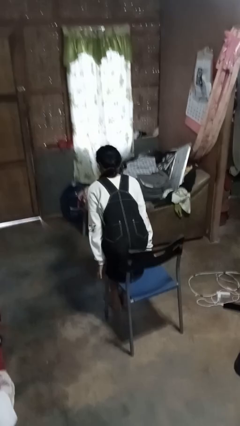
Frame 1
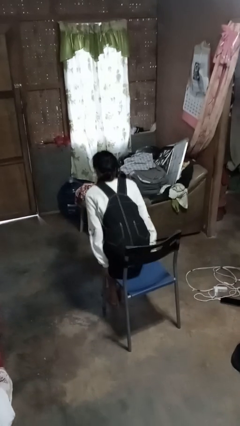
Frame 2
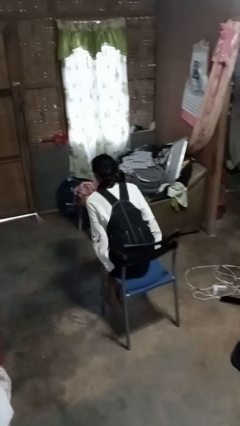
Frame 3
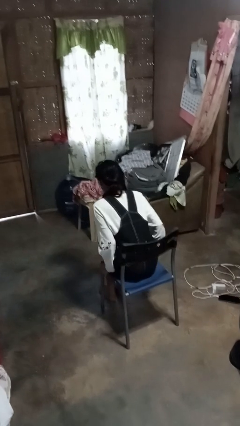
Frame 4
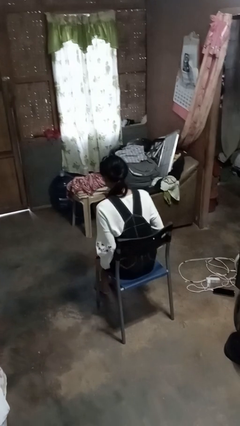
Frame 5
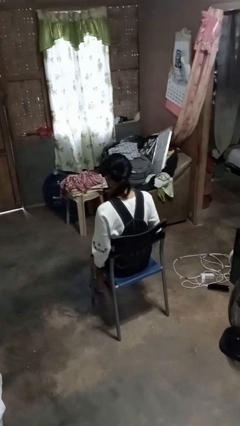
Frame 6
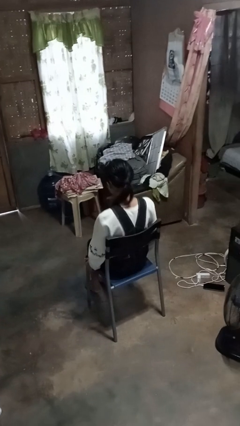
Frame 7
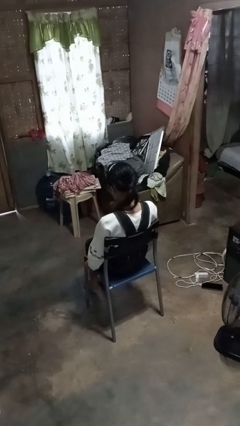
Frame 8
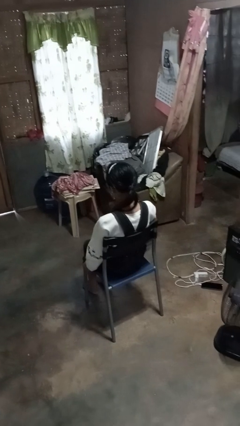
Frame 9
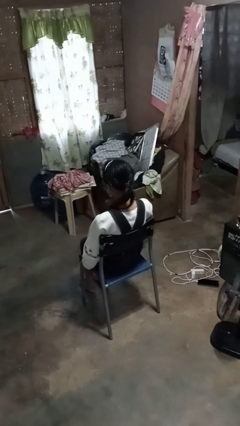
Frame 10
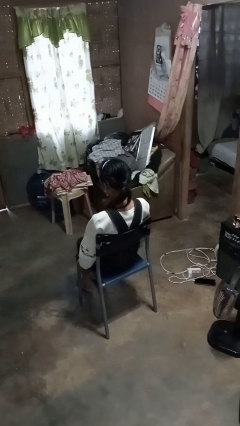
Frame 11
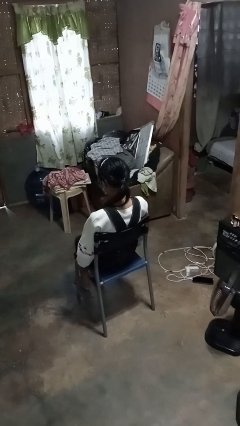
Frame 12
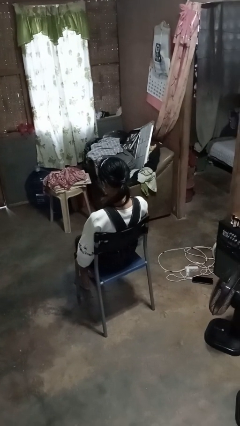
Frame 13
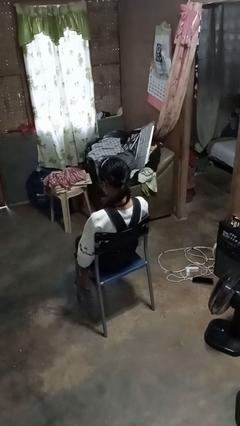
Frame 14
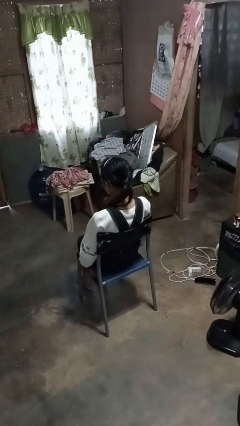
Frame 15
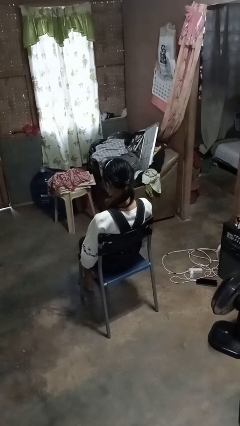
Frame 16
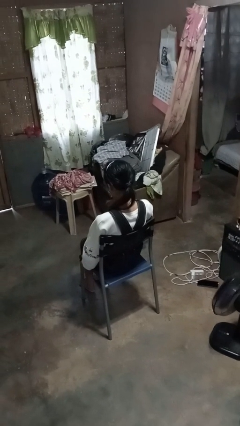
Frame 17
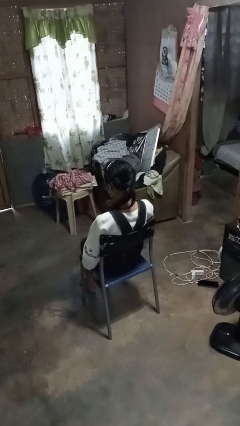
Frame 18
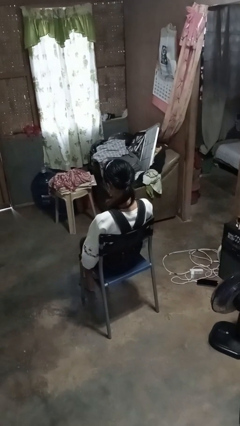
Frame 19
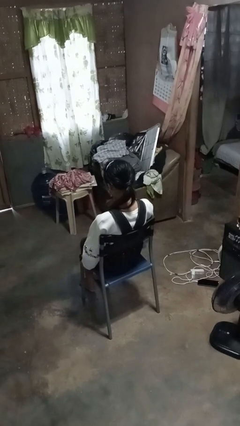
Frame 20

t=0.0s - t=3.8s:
person sits down

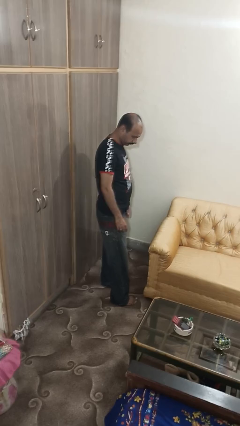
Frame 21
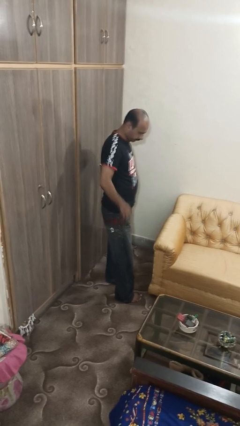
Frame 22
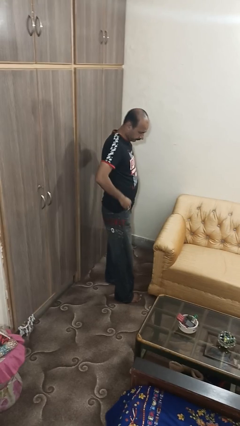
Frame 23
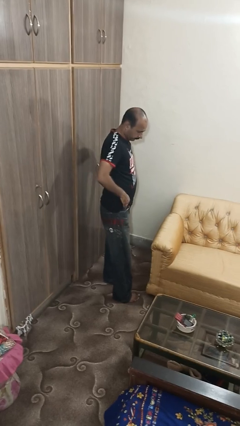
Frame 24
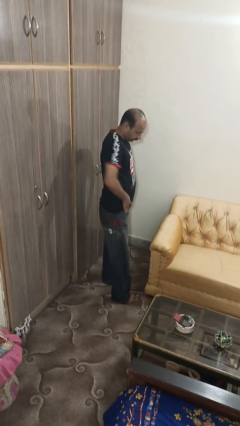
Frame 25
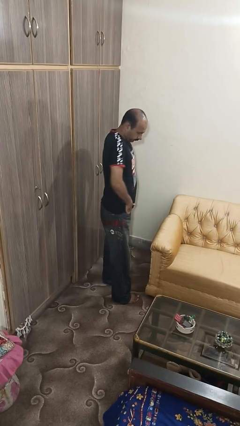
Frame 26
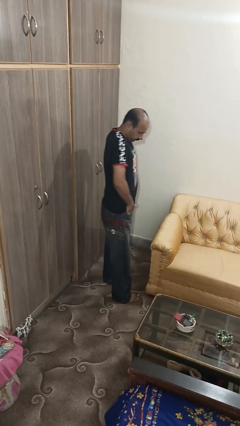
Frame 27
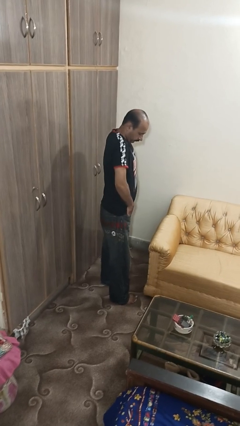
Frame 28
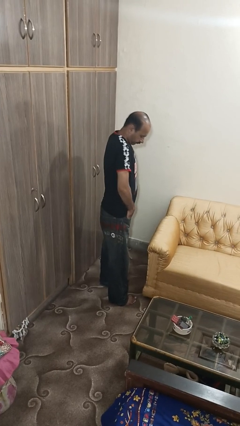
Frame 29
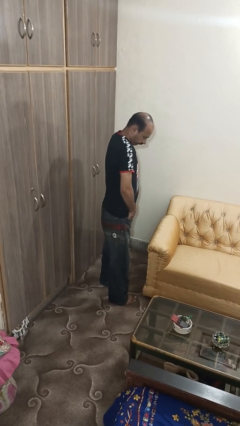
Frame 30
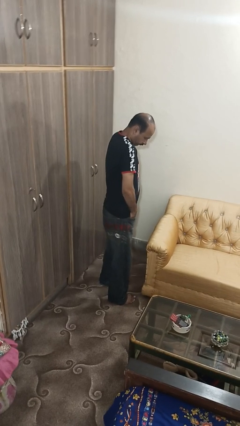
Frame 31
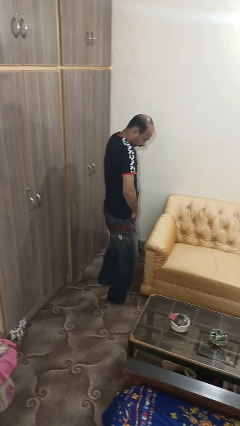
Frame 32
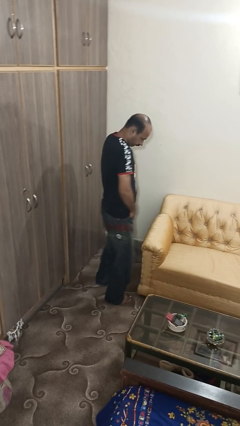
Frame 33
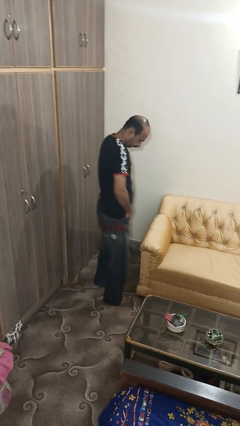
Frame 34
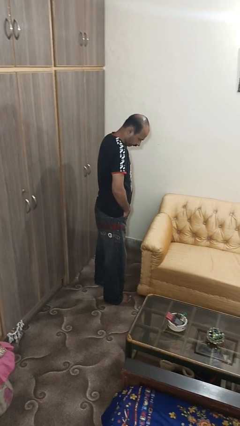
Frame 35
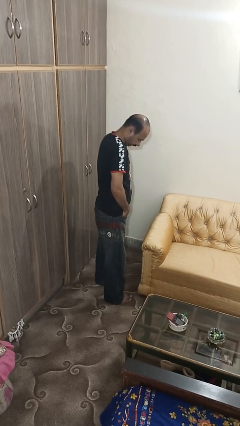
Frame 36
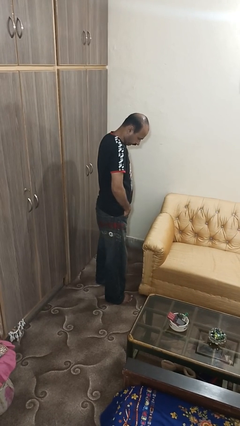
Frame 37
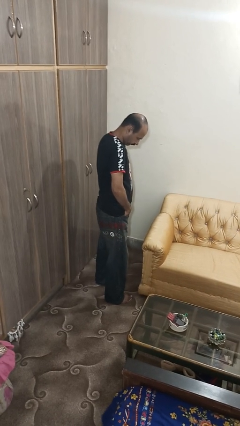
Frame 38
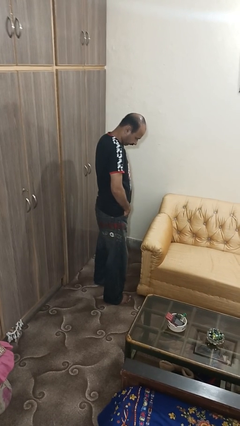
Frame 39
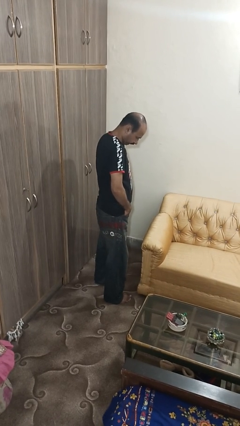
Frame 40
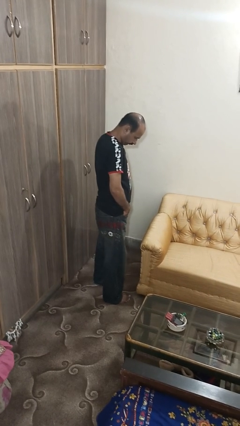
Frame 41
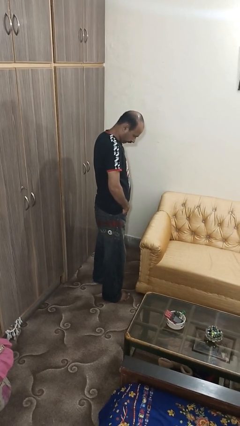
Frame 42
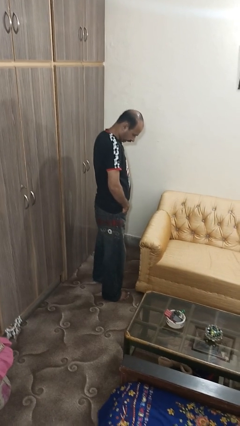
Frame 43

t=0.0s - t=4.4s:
person puts hands in back pockets

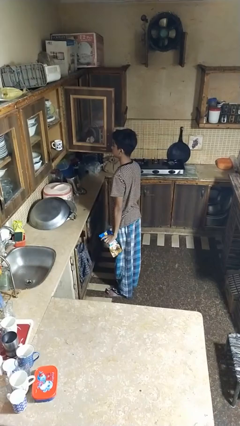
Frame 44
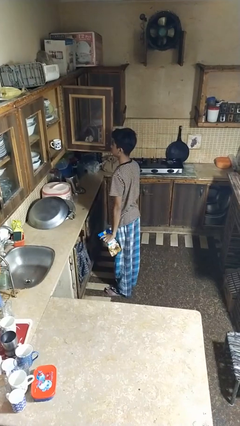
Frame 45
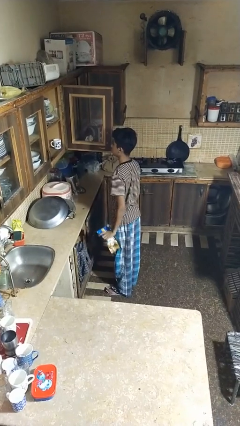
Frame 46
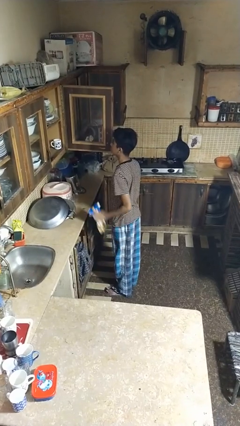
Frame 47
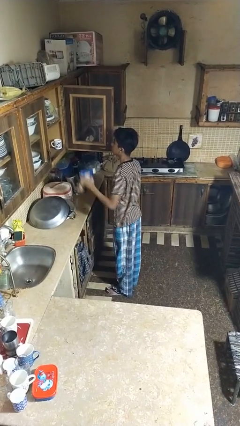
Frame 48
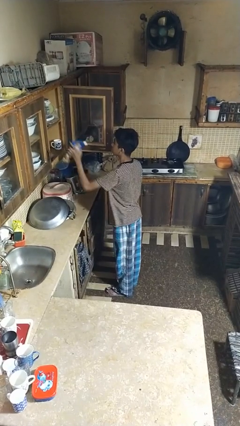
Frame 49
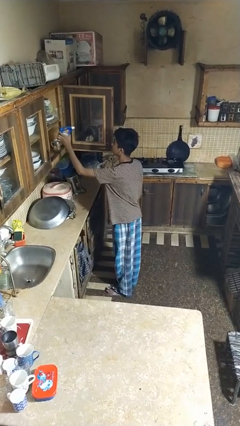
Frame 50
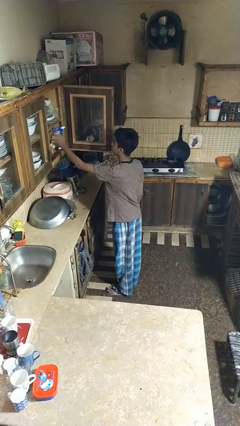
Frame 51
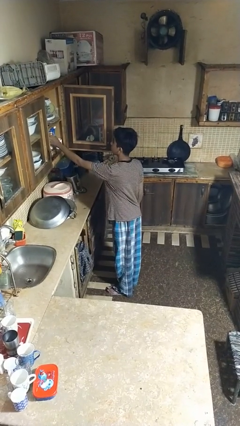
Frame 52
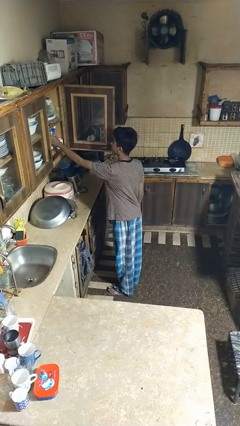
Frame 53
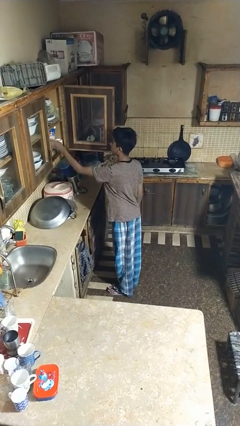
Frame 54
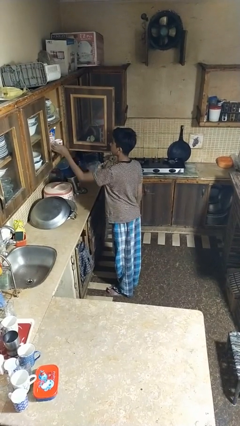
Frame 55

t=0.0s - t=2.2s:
person puts object in cabinet

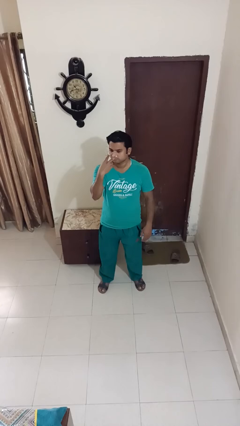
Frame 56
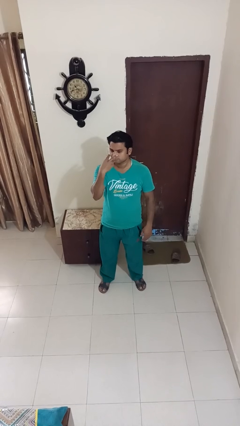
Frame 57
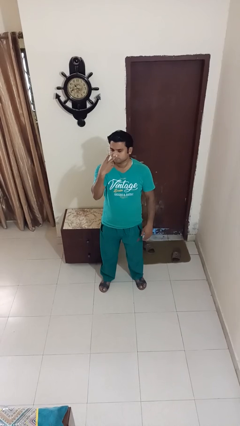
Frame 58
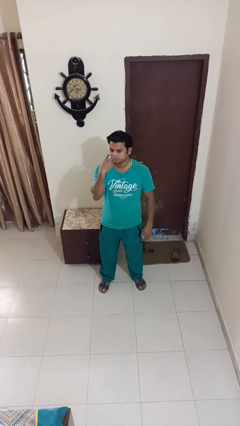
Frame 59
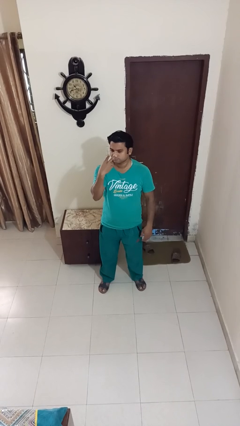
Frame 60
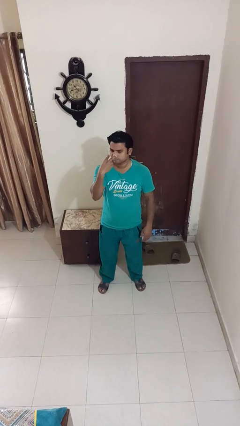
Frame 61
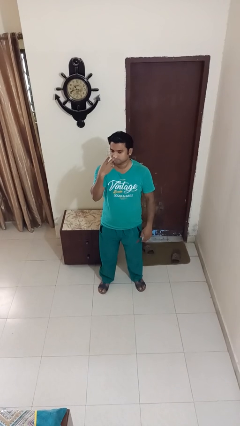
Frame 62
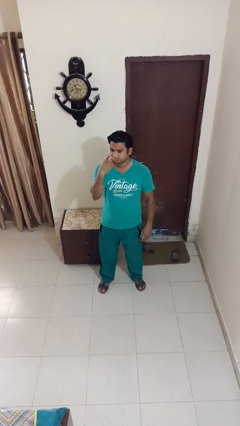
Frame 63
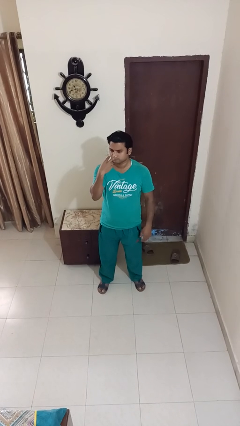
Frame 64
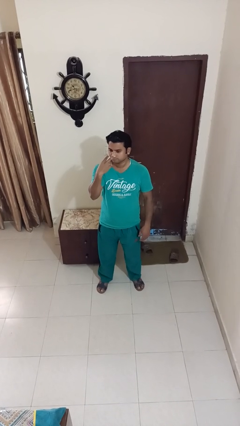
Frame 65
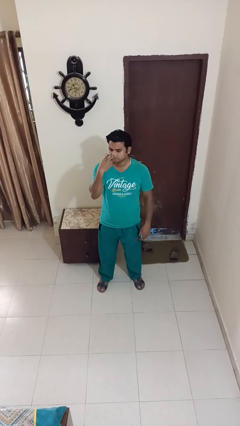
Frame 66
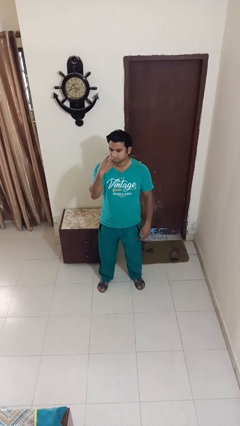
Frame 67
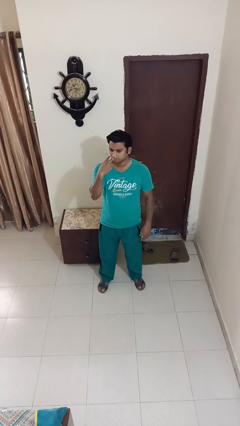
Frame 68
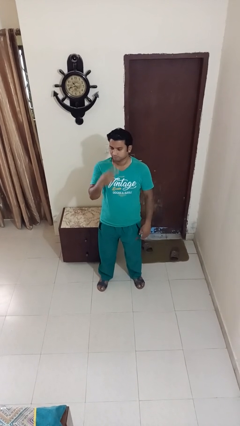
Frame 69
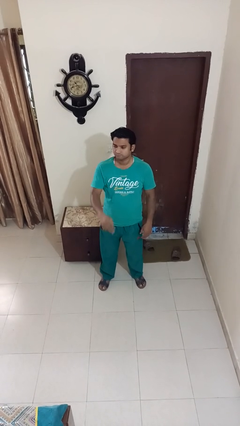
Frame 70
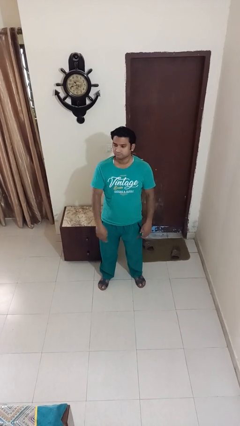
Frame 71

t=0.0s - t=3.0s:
person gestures watch closely

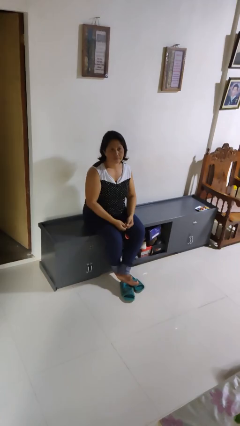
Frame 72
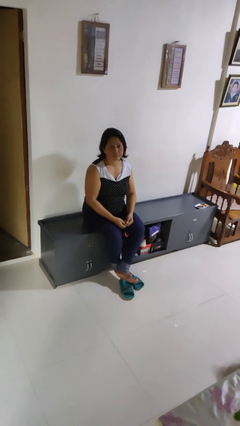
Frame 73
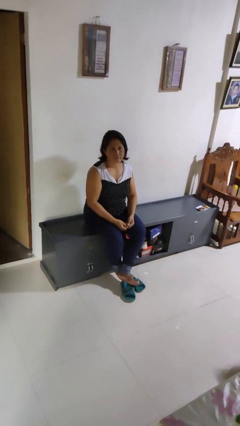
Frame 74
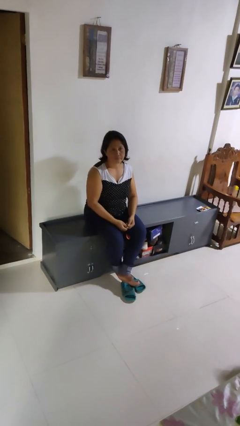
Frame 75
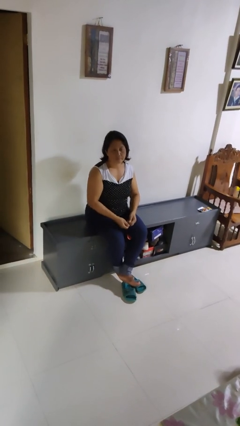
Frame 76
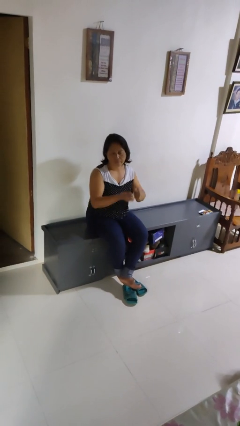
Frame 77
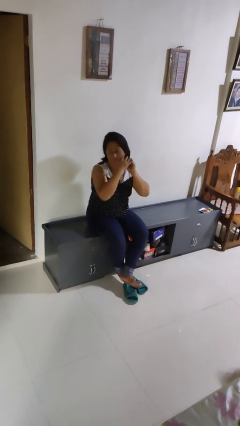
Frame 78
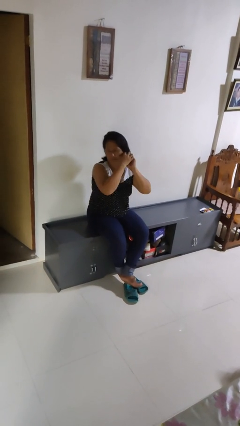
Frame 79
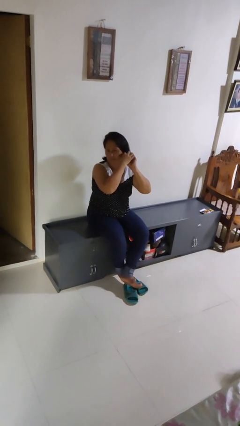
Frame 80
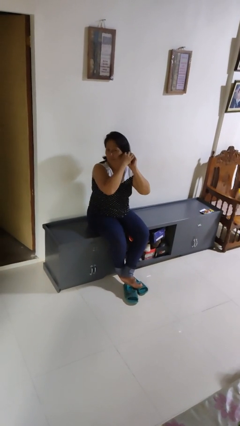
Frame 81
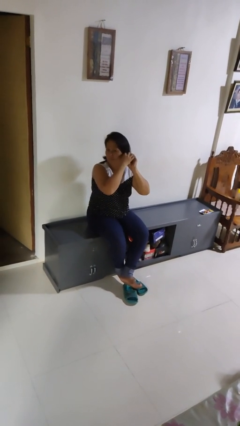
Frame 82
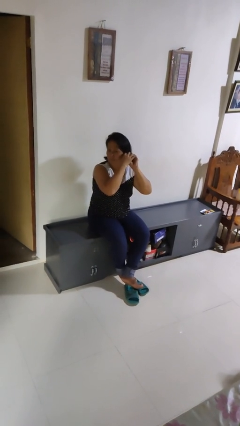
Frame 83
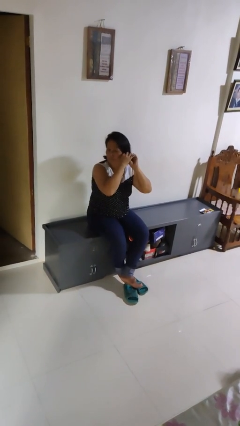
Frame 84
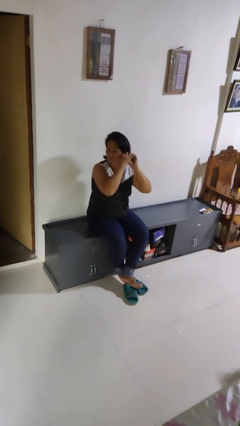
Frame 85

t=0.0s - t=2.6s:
person puts on earrings

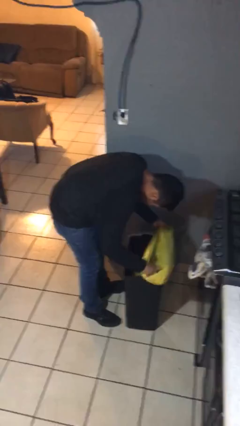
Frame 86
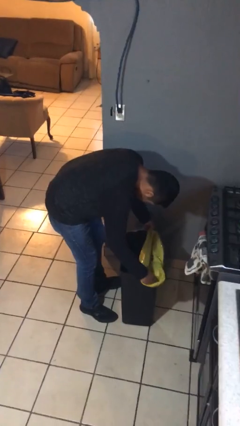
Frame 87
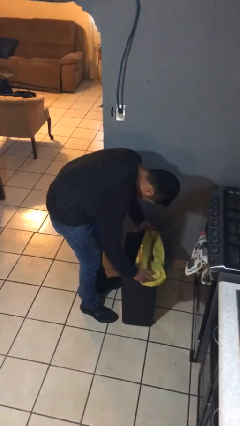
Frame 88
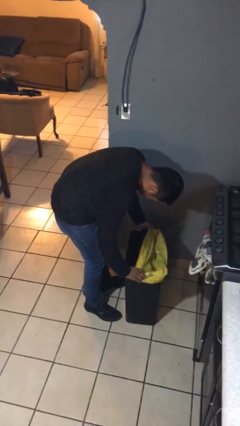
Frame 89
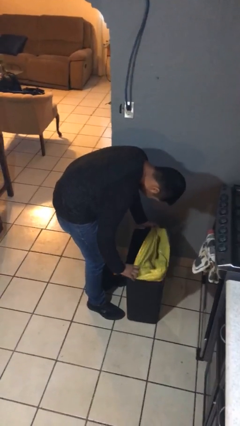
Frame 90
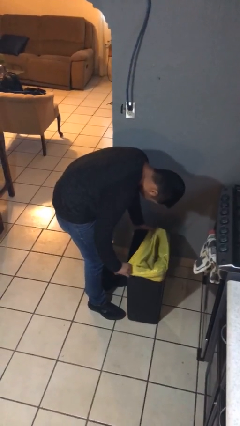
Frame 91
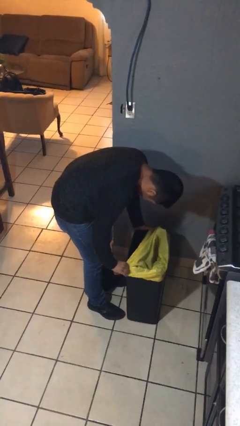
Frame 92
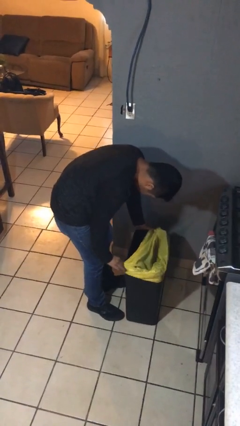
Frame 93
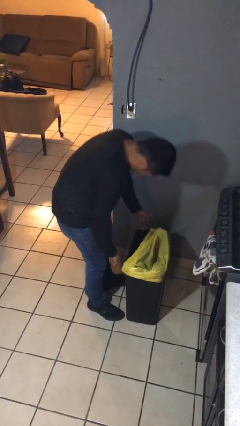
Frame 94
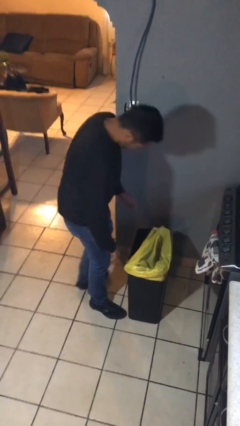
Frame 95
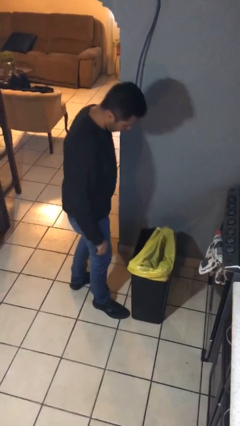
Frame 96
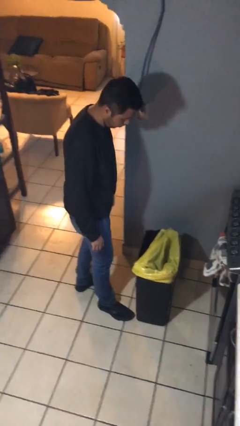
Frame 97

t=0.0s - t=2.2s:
person inserts trashbag into trashcan
